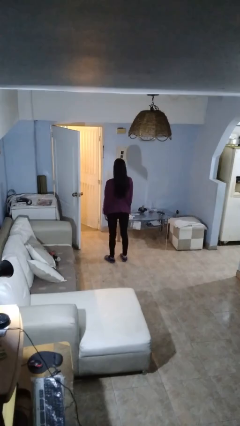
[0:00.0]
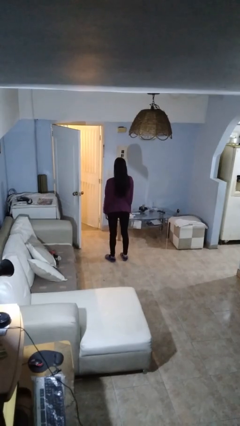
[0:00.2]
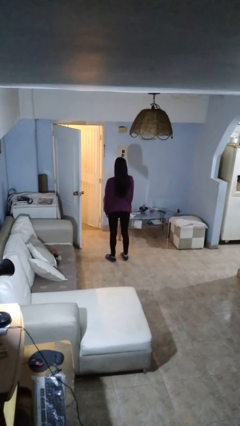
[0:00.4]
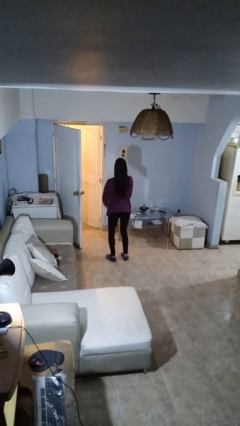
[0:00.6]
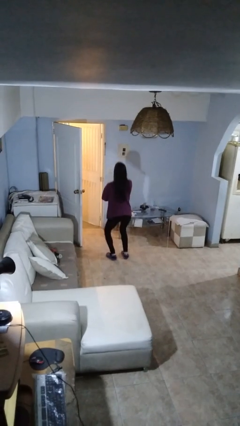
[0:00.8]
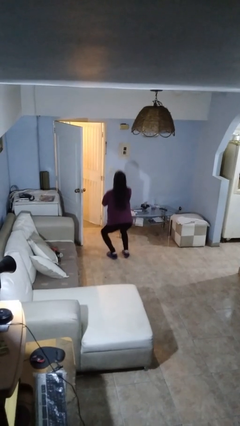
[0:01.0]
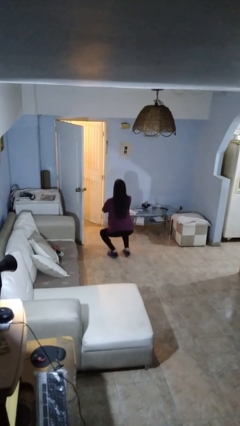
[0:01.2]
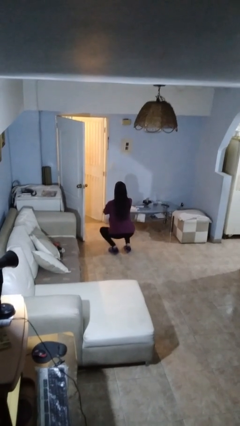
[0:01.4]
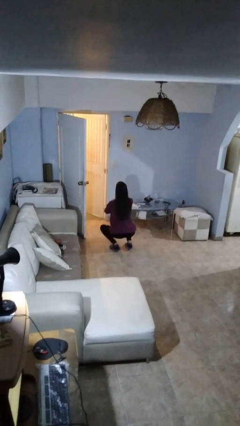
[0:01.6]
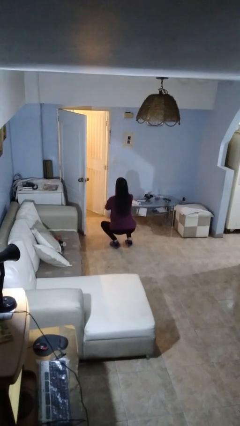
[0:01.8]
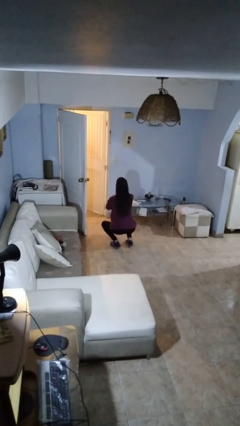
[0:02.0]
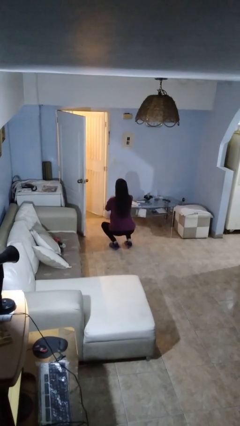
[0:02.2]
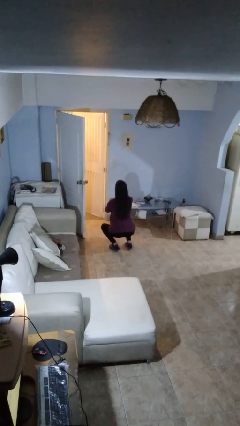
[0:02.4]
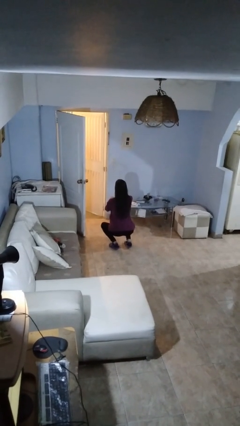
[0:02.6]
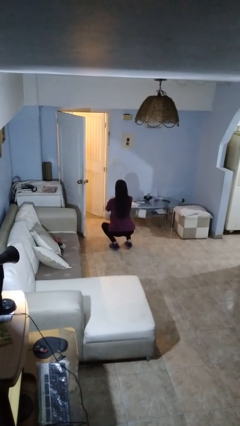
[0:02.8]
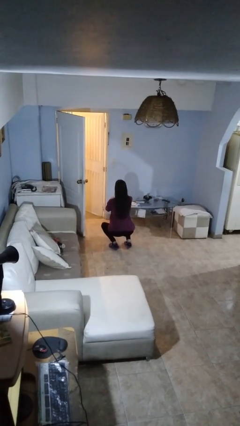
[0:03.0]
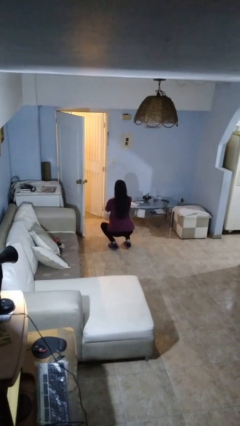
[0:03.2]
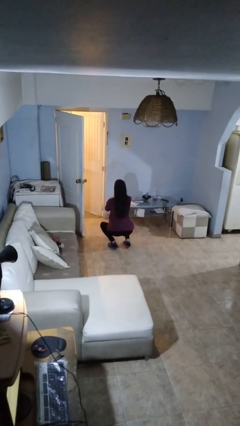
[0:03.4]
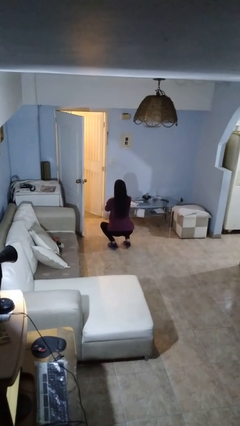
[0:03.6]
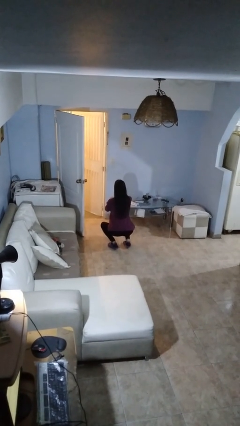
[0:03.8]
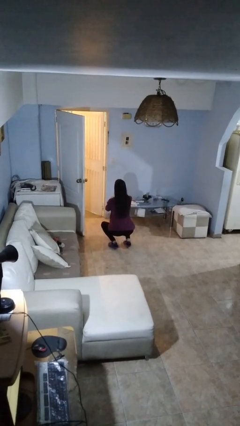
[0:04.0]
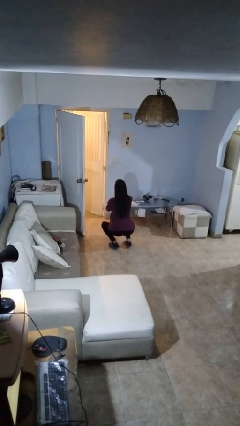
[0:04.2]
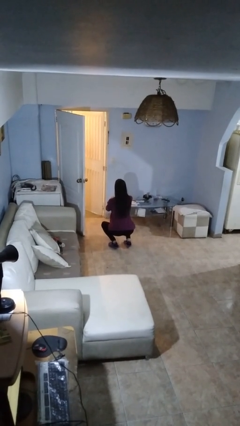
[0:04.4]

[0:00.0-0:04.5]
person squats

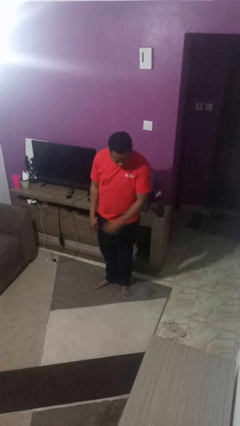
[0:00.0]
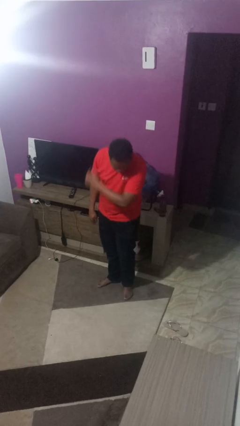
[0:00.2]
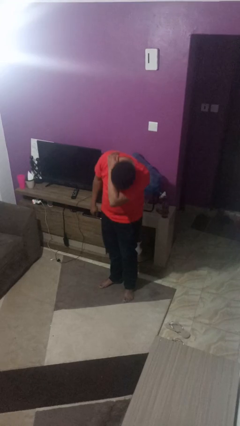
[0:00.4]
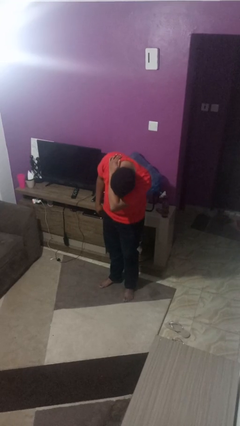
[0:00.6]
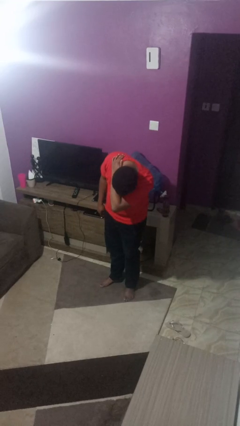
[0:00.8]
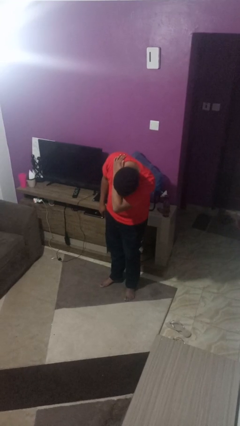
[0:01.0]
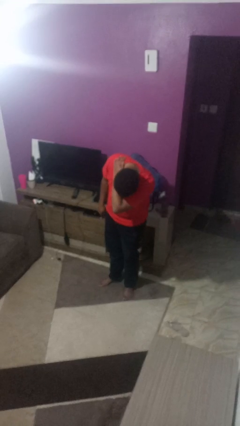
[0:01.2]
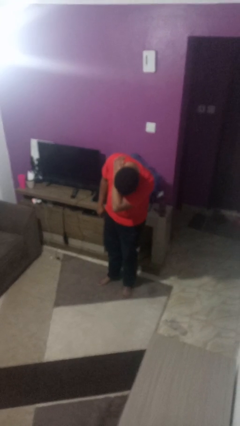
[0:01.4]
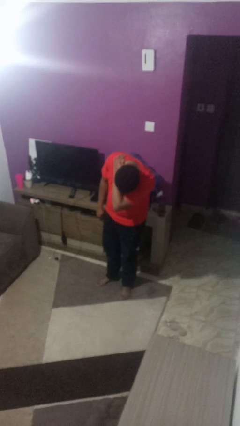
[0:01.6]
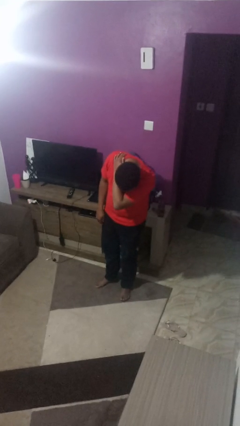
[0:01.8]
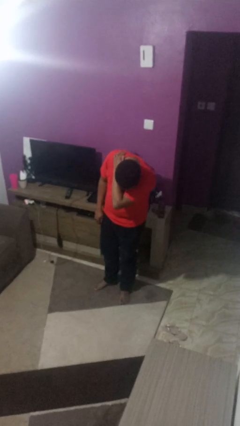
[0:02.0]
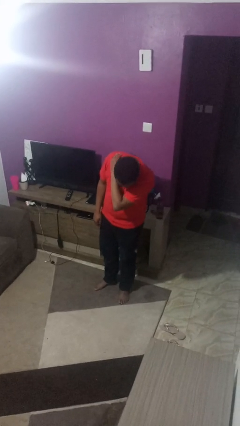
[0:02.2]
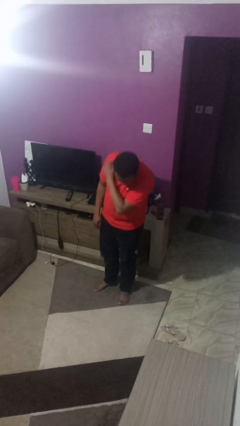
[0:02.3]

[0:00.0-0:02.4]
person sneezes into arm

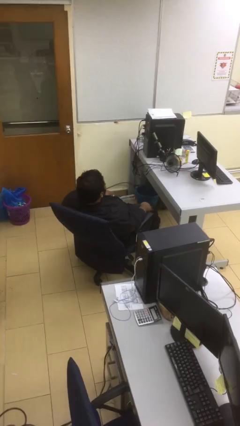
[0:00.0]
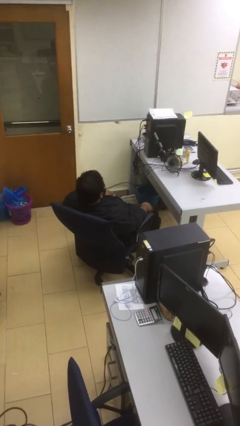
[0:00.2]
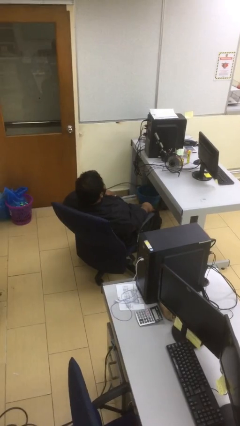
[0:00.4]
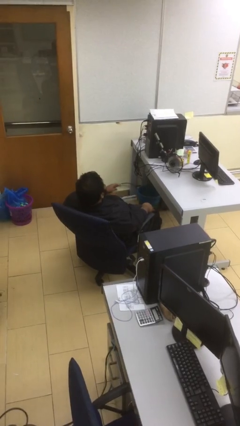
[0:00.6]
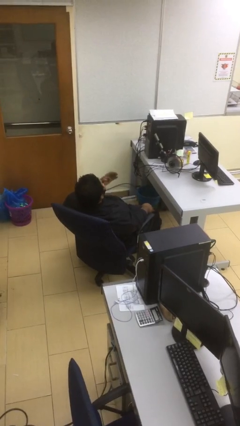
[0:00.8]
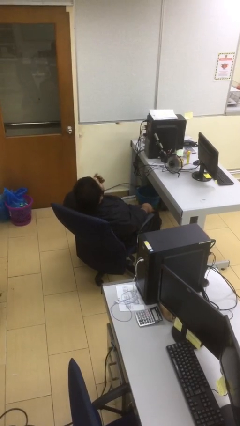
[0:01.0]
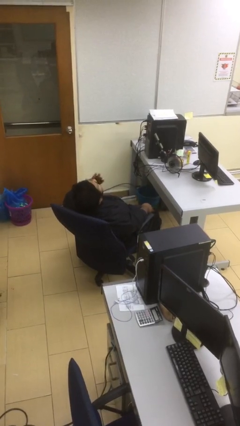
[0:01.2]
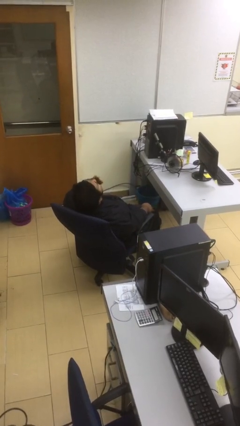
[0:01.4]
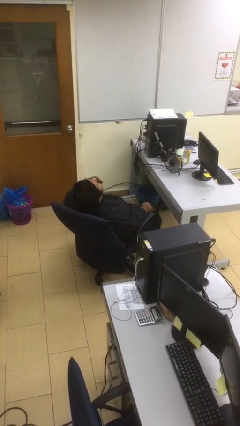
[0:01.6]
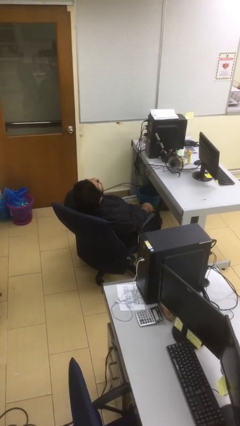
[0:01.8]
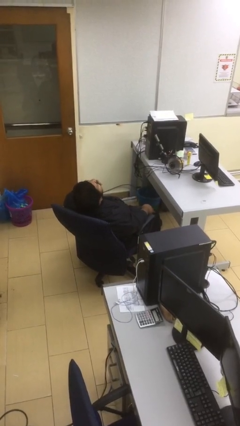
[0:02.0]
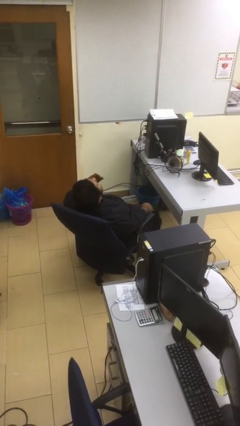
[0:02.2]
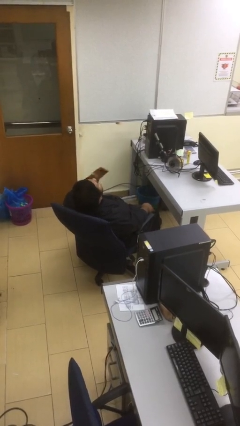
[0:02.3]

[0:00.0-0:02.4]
person yawns

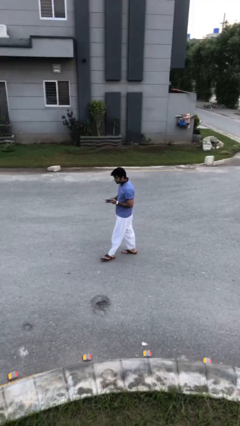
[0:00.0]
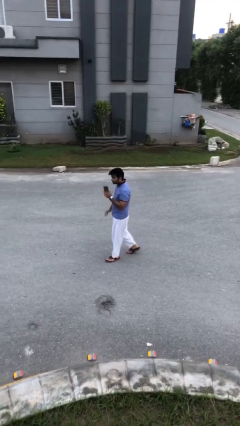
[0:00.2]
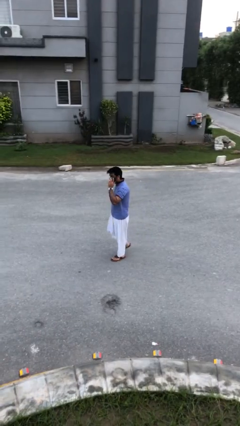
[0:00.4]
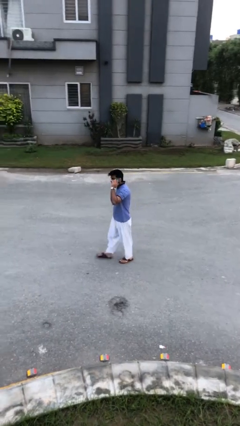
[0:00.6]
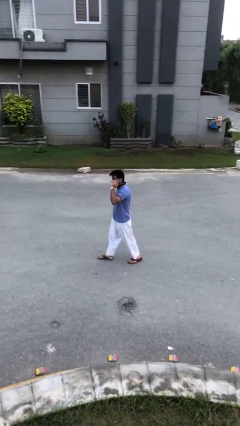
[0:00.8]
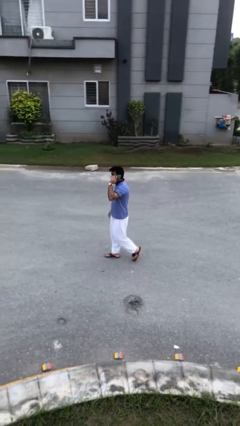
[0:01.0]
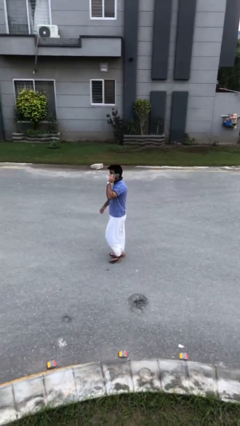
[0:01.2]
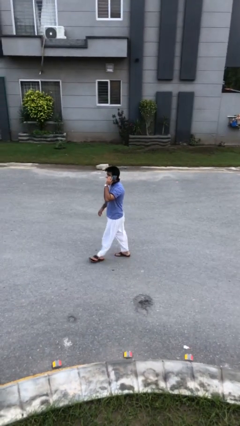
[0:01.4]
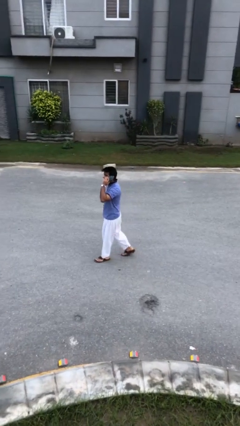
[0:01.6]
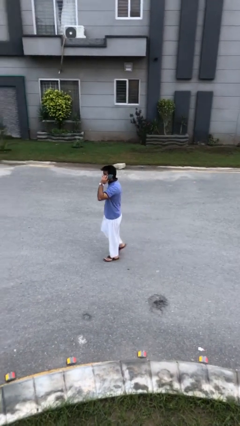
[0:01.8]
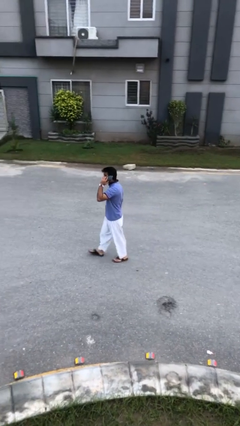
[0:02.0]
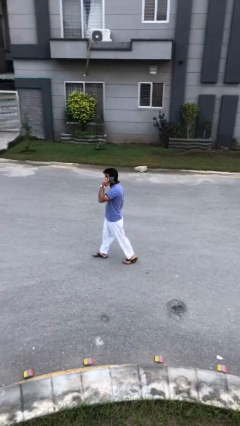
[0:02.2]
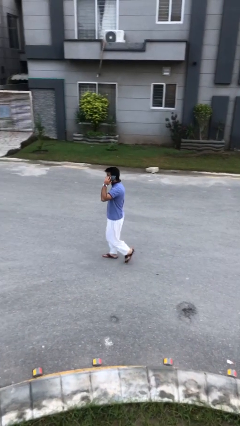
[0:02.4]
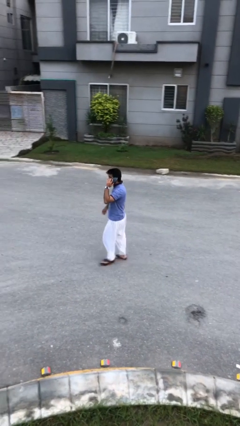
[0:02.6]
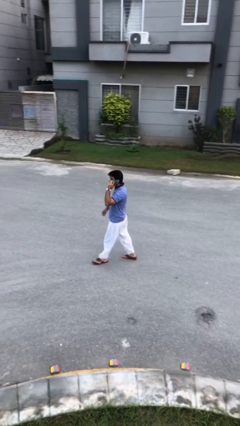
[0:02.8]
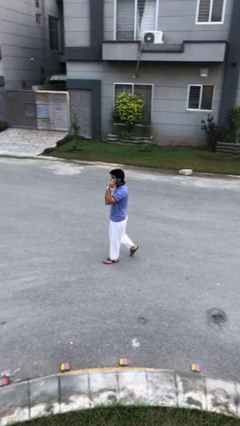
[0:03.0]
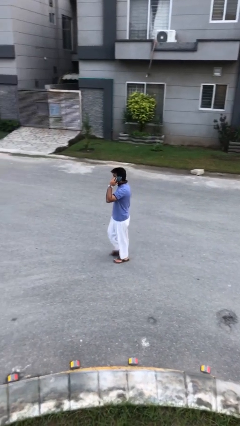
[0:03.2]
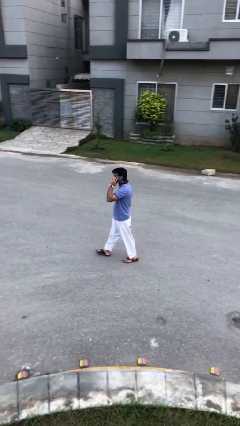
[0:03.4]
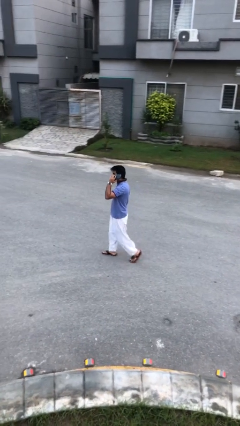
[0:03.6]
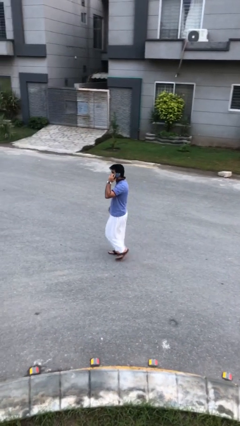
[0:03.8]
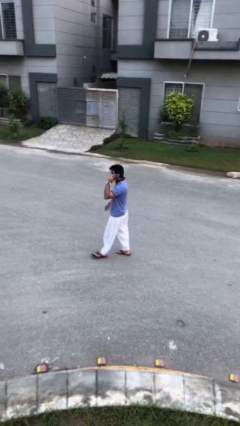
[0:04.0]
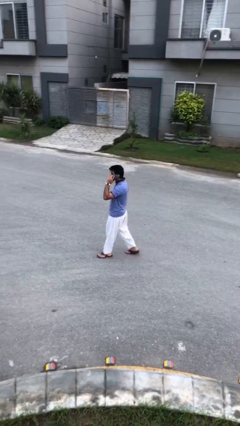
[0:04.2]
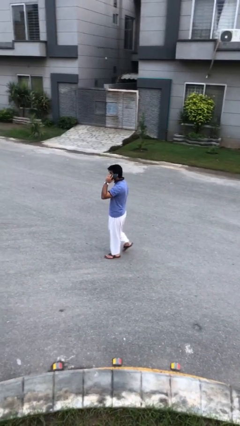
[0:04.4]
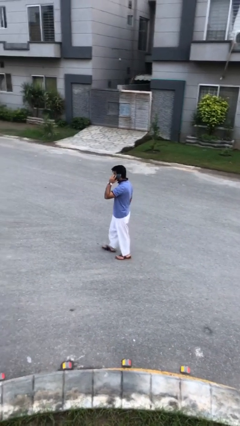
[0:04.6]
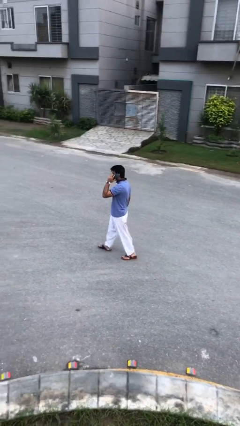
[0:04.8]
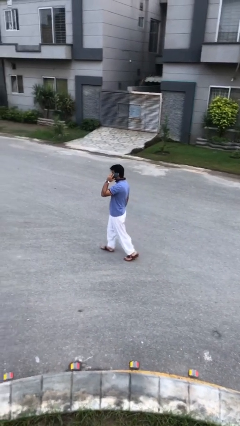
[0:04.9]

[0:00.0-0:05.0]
person talks on phone

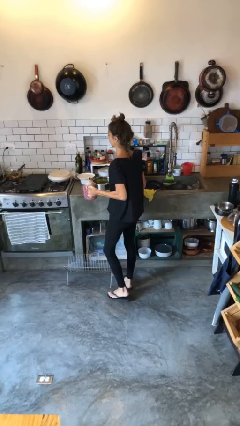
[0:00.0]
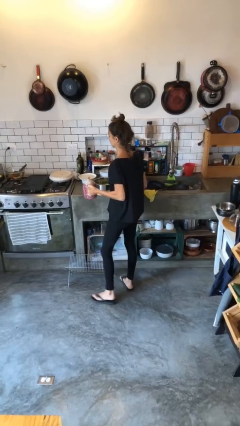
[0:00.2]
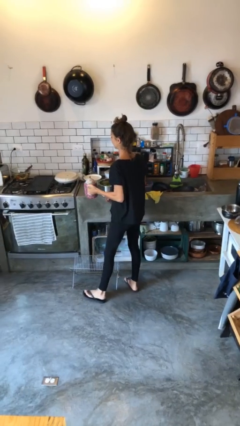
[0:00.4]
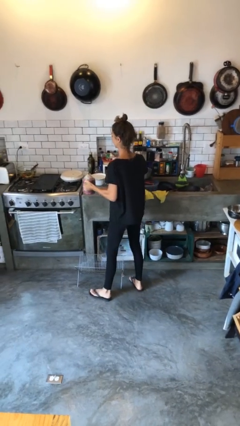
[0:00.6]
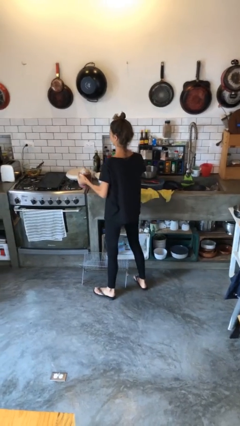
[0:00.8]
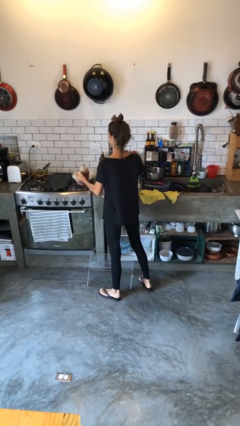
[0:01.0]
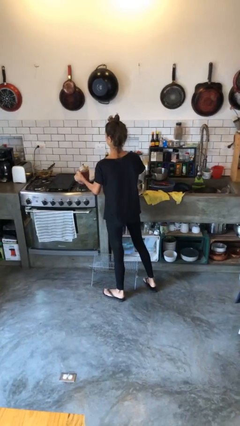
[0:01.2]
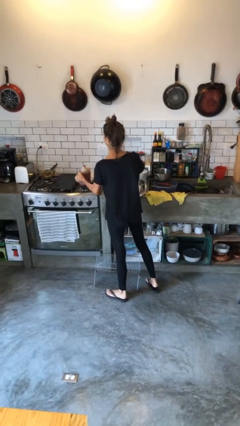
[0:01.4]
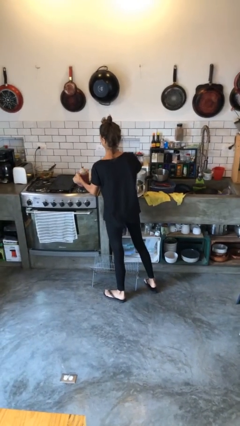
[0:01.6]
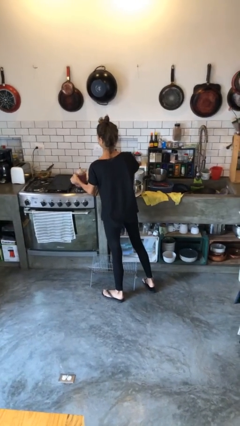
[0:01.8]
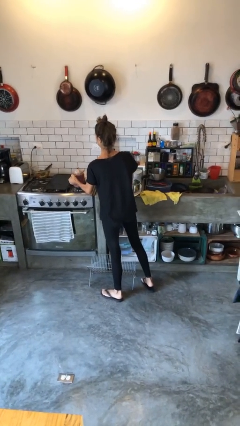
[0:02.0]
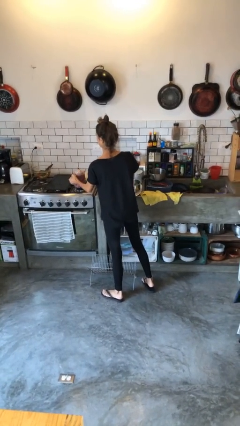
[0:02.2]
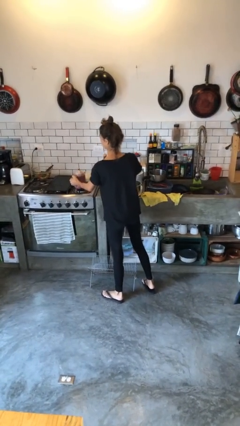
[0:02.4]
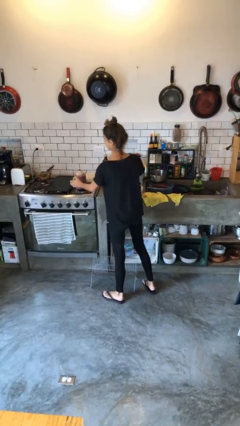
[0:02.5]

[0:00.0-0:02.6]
person puts down object on countertop

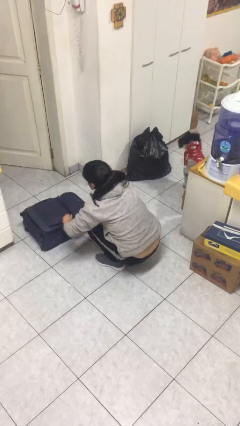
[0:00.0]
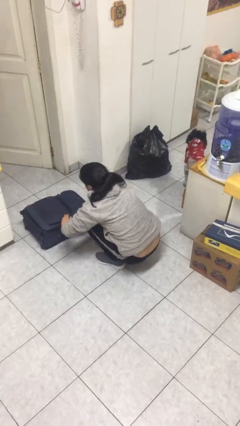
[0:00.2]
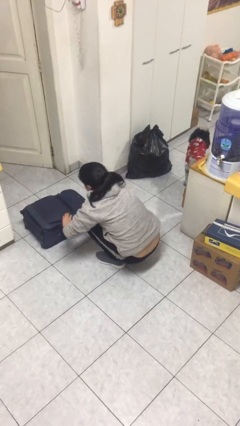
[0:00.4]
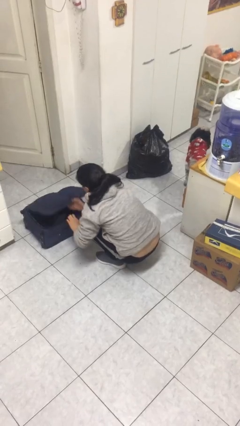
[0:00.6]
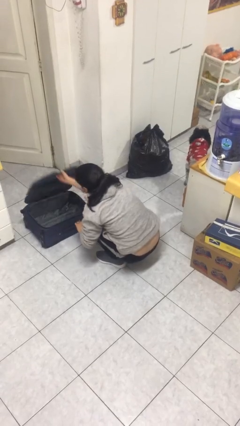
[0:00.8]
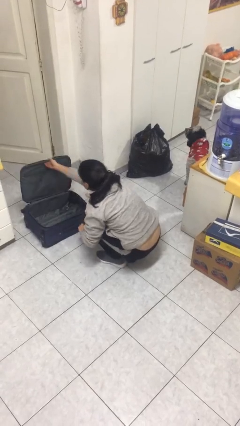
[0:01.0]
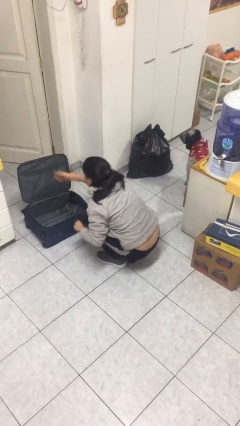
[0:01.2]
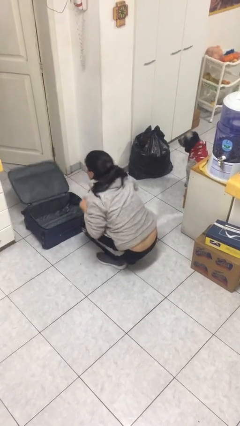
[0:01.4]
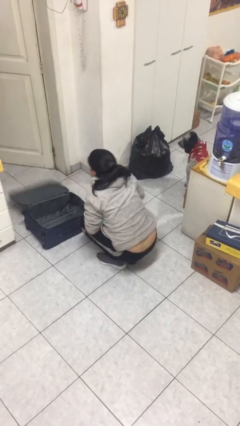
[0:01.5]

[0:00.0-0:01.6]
person opens suitcase
